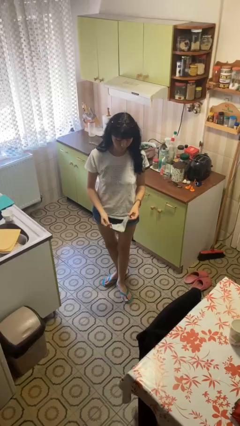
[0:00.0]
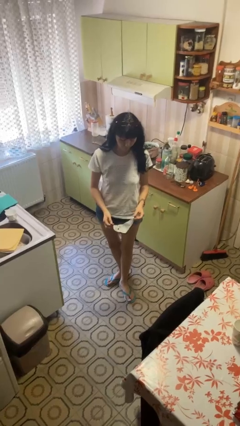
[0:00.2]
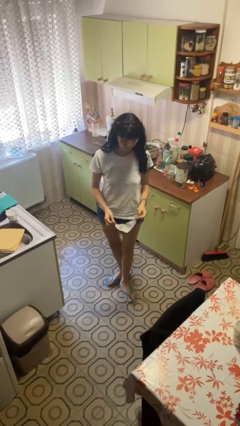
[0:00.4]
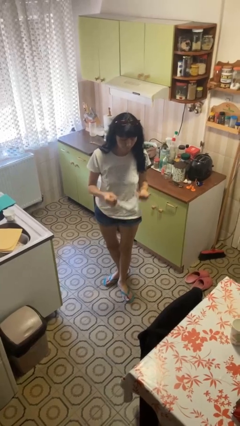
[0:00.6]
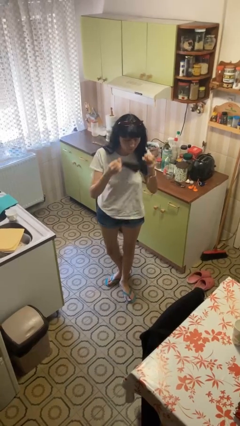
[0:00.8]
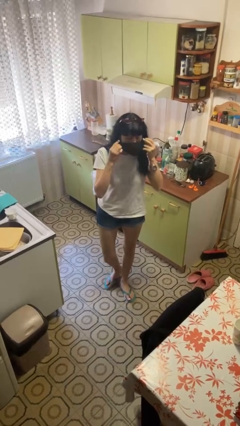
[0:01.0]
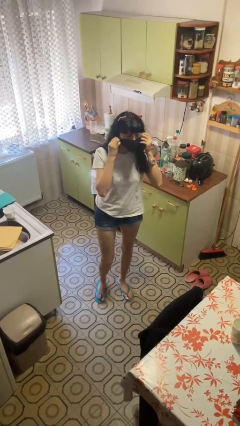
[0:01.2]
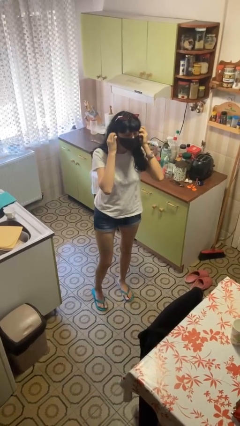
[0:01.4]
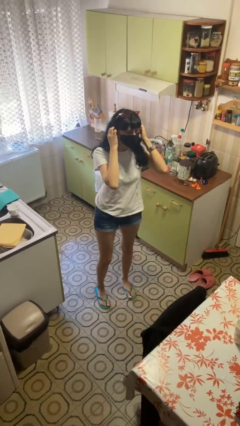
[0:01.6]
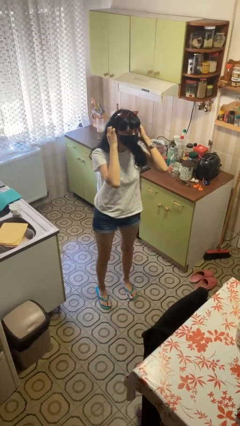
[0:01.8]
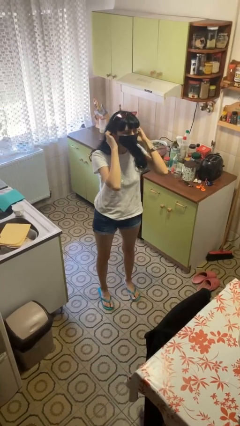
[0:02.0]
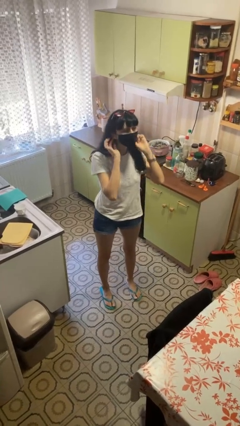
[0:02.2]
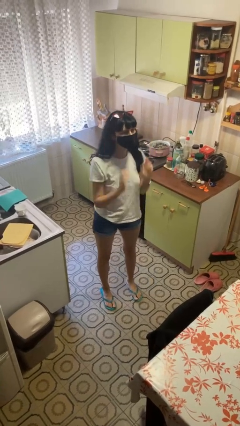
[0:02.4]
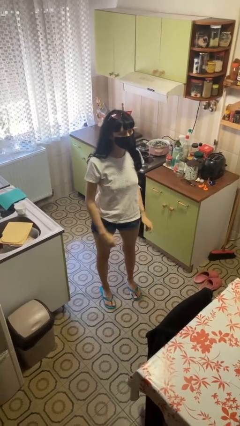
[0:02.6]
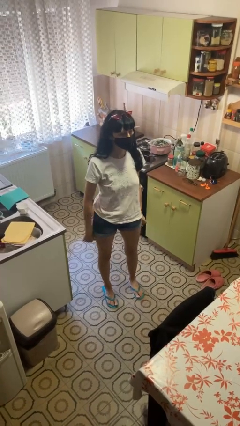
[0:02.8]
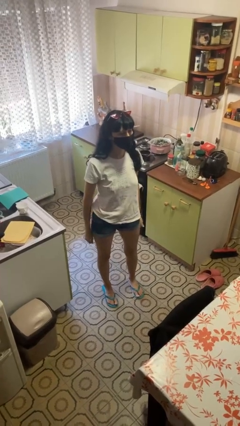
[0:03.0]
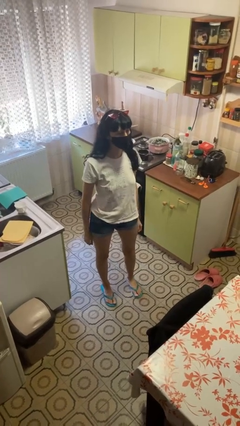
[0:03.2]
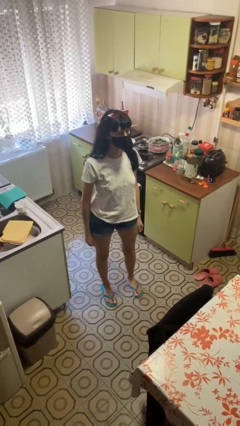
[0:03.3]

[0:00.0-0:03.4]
person puts on facemask

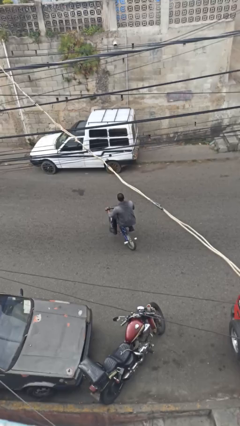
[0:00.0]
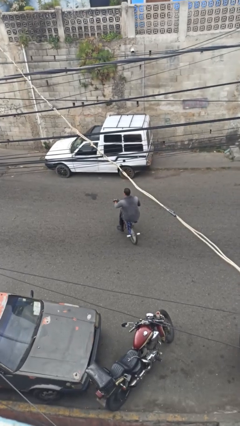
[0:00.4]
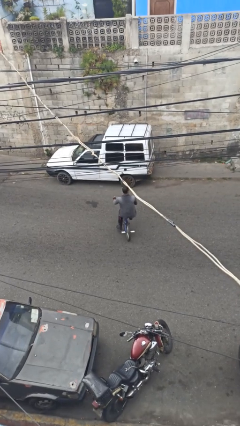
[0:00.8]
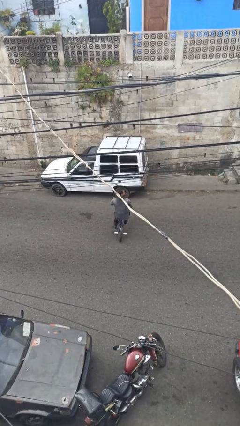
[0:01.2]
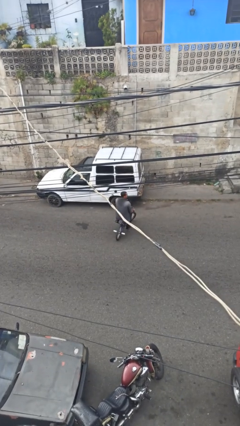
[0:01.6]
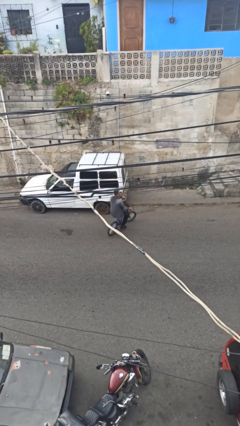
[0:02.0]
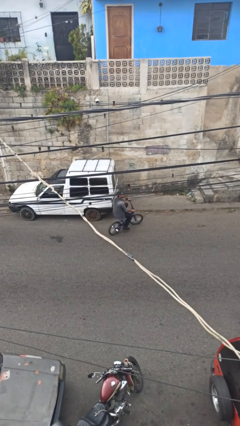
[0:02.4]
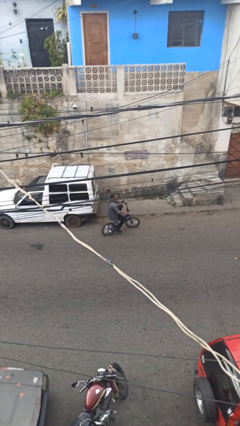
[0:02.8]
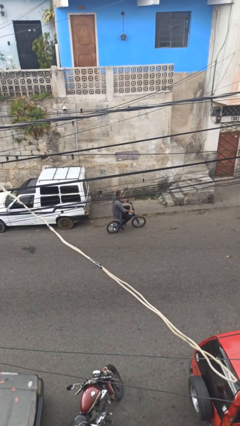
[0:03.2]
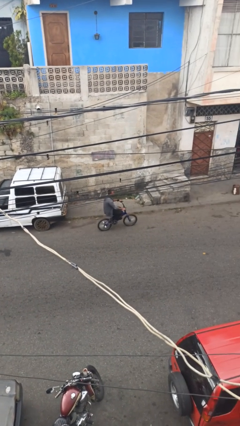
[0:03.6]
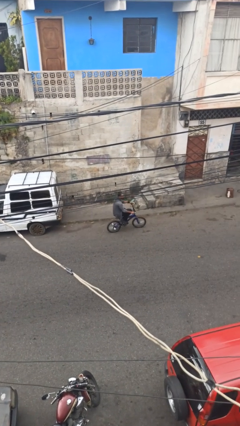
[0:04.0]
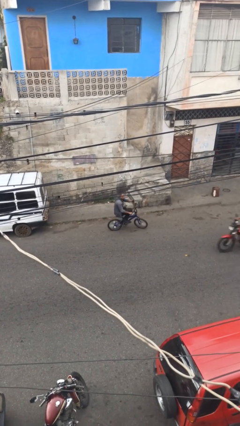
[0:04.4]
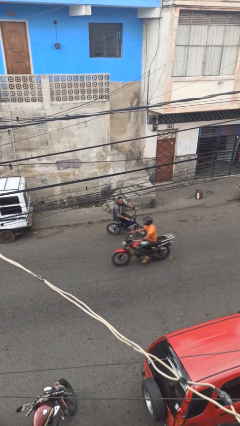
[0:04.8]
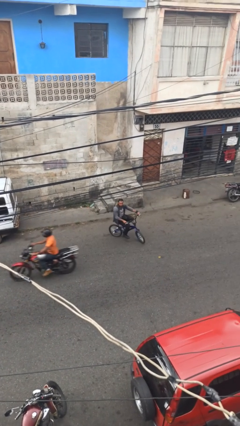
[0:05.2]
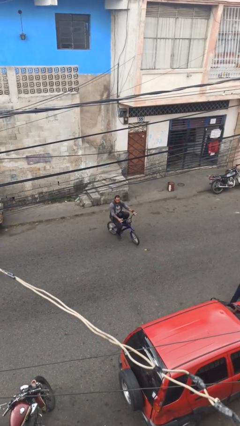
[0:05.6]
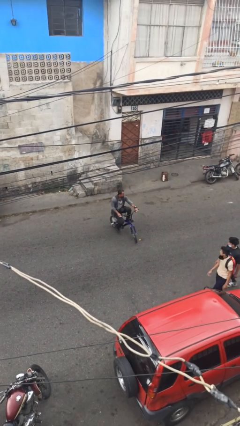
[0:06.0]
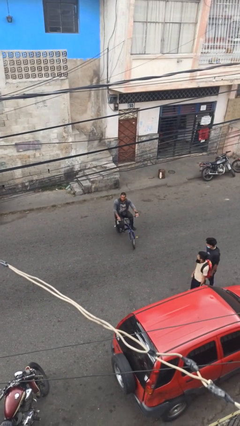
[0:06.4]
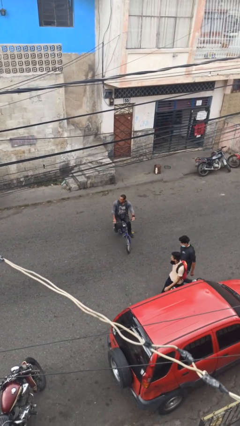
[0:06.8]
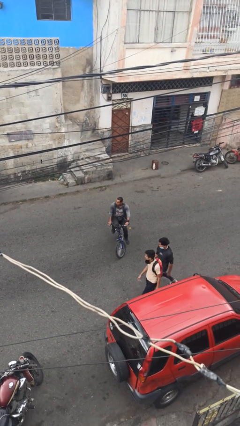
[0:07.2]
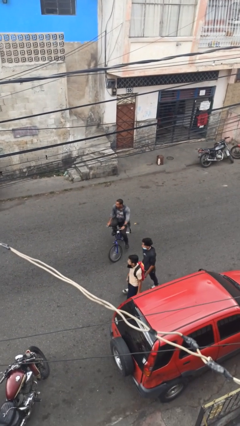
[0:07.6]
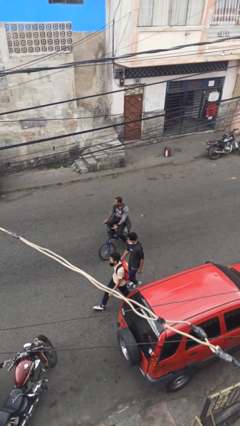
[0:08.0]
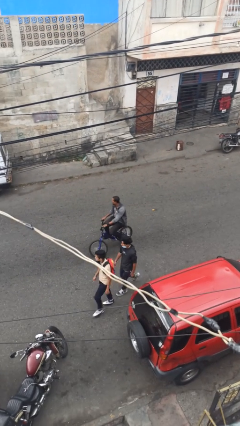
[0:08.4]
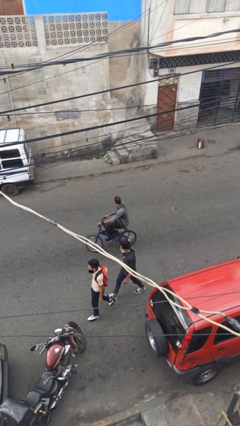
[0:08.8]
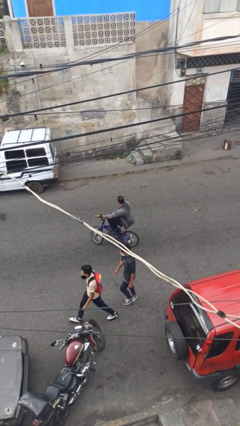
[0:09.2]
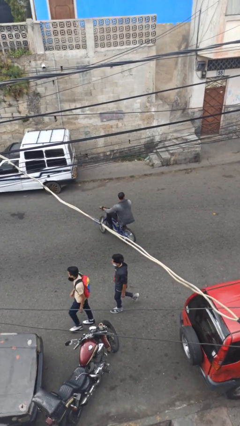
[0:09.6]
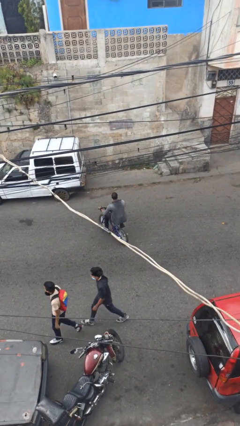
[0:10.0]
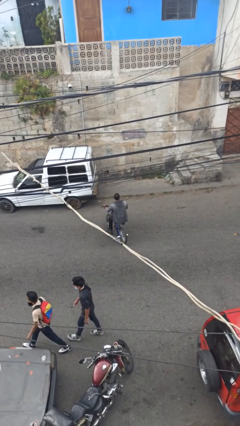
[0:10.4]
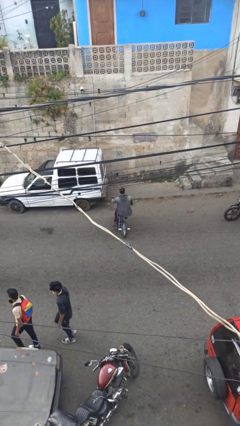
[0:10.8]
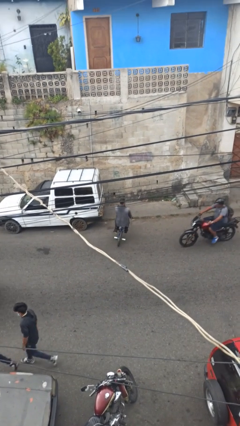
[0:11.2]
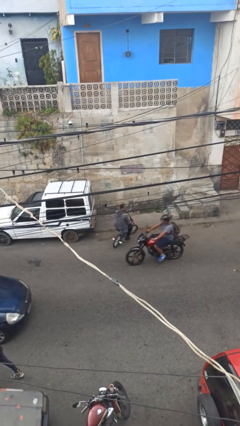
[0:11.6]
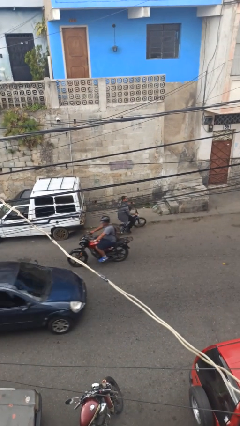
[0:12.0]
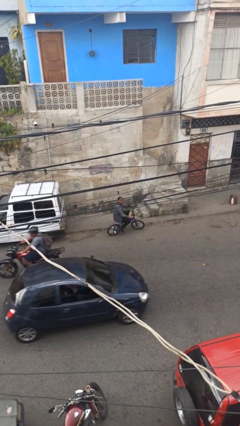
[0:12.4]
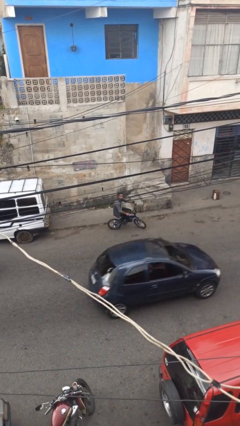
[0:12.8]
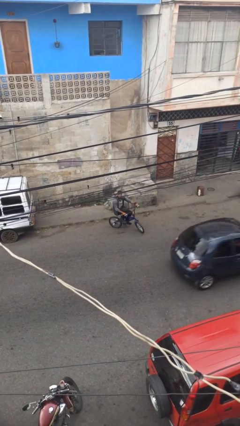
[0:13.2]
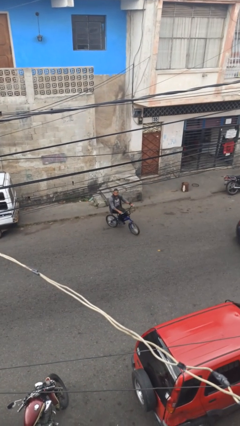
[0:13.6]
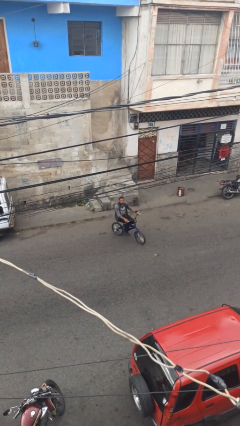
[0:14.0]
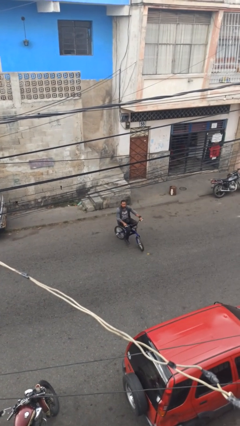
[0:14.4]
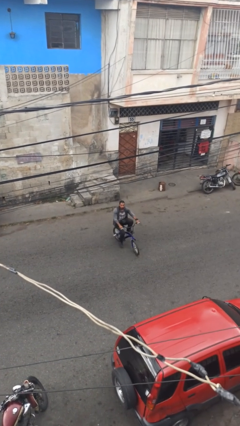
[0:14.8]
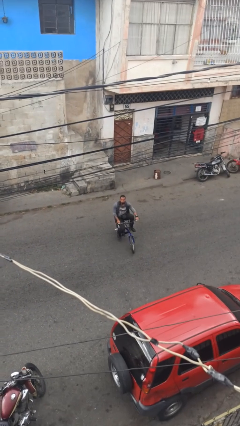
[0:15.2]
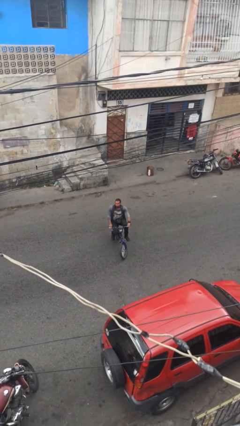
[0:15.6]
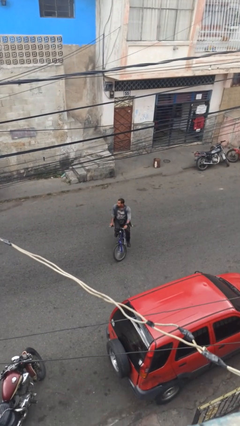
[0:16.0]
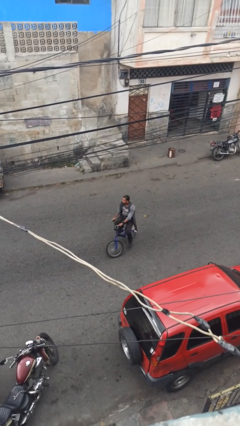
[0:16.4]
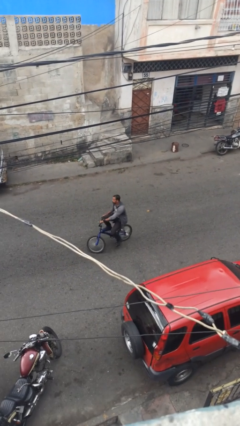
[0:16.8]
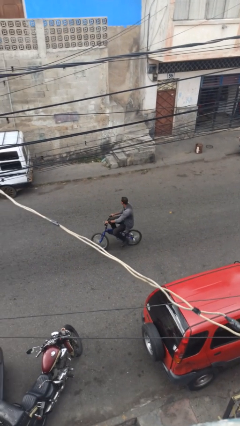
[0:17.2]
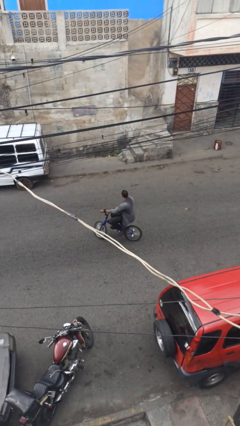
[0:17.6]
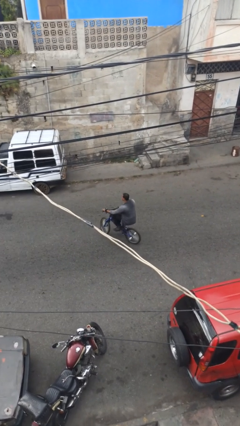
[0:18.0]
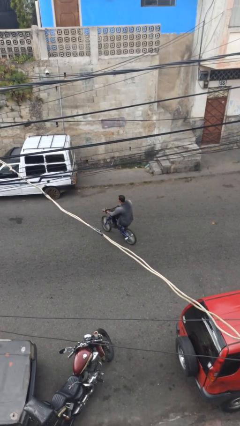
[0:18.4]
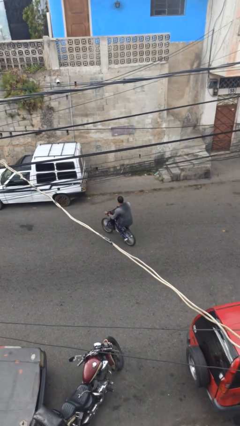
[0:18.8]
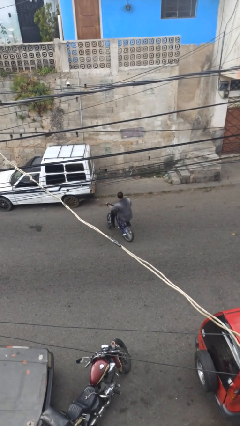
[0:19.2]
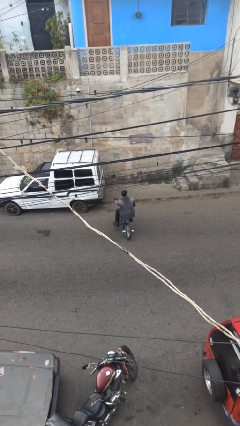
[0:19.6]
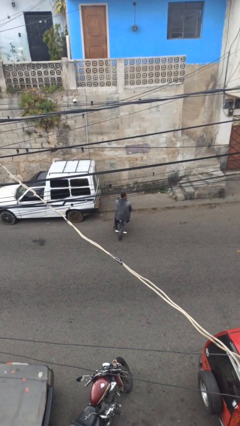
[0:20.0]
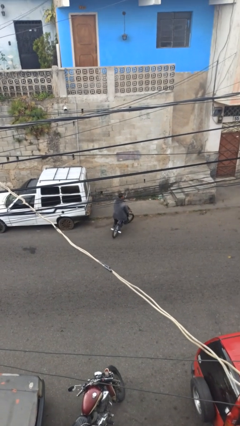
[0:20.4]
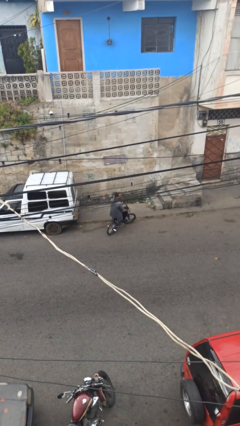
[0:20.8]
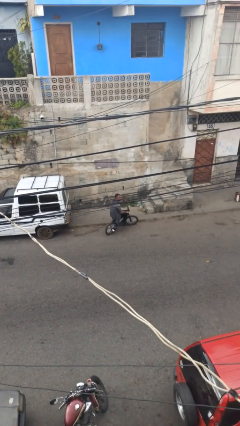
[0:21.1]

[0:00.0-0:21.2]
person rides bicycle

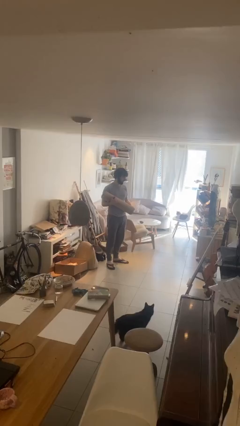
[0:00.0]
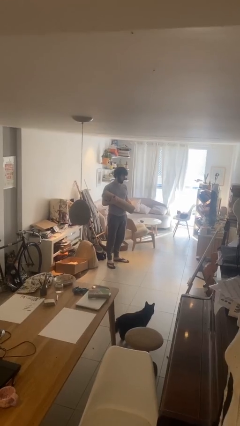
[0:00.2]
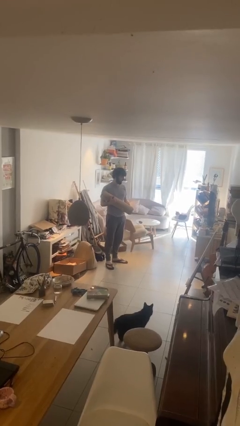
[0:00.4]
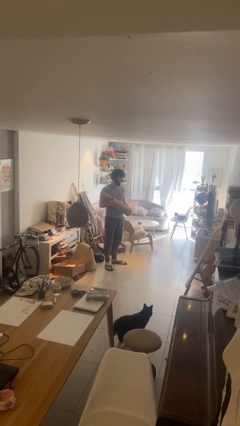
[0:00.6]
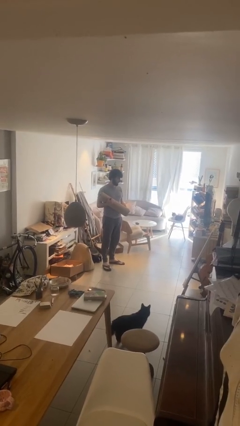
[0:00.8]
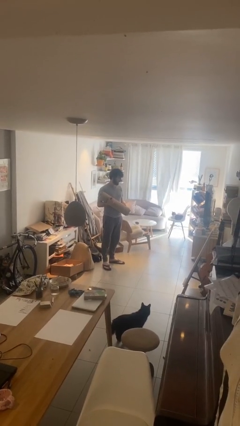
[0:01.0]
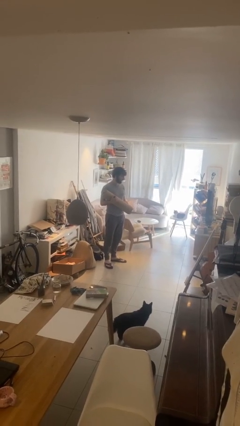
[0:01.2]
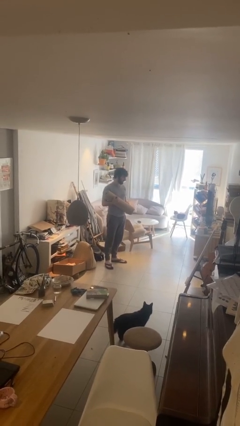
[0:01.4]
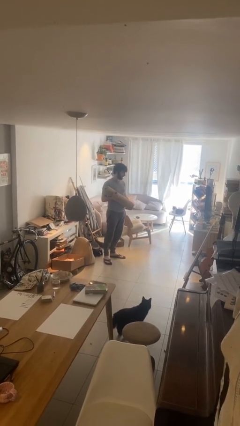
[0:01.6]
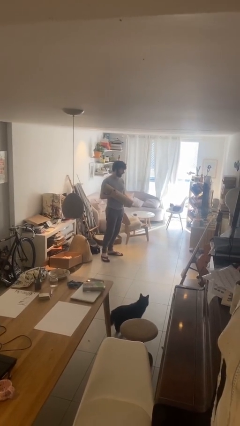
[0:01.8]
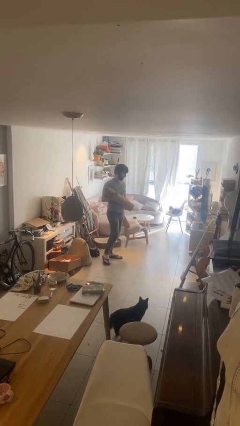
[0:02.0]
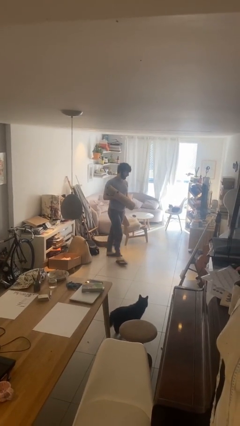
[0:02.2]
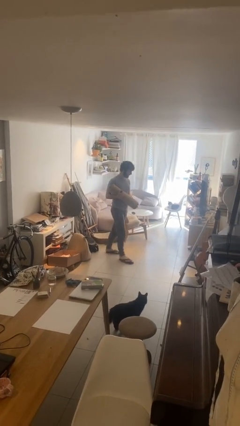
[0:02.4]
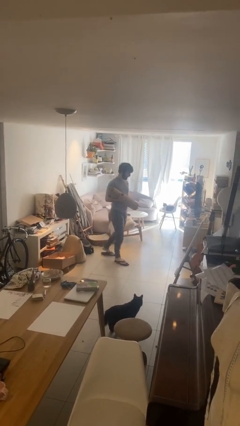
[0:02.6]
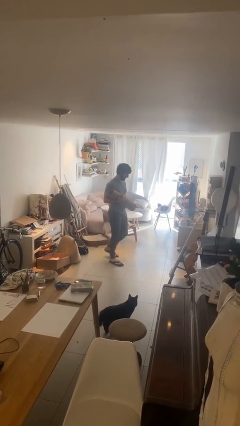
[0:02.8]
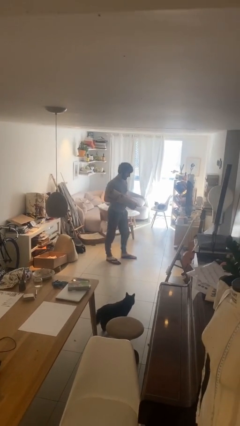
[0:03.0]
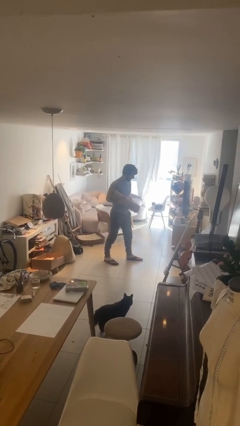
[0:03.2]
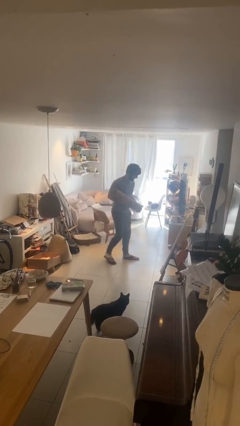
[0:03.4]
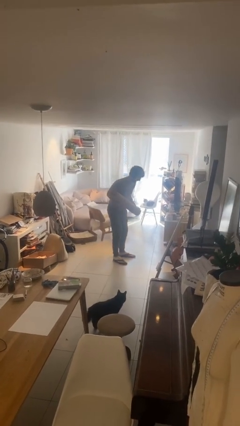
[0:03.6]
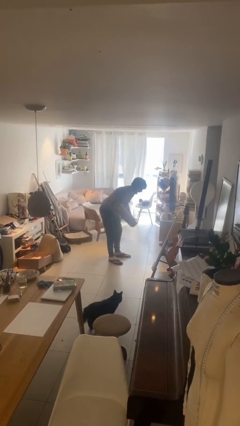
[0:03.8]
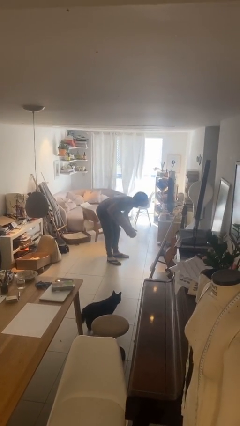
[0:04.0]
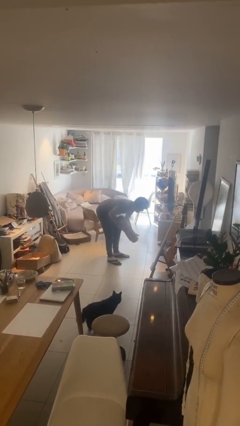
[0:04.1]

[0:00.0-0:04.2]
person carries heavy object
